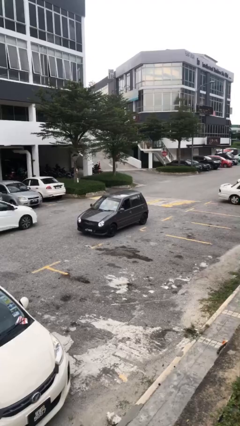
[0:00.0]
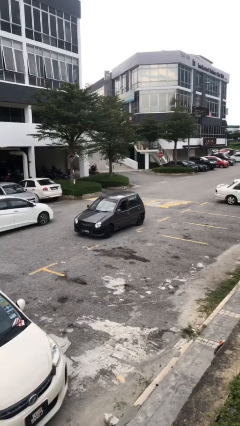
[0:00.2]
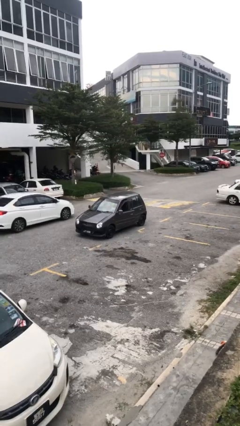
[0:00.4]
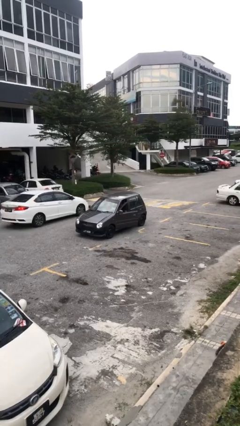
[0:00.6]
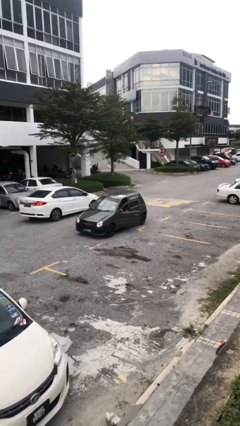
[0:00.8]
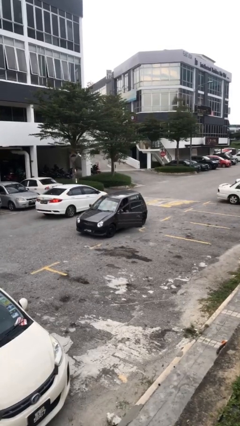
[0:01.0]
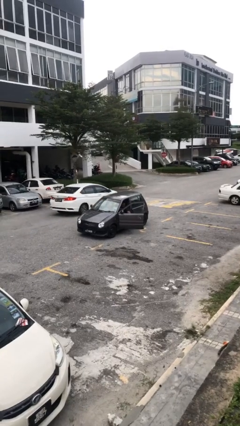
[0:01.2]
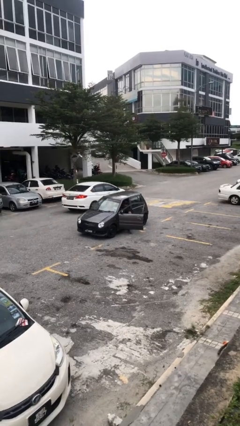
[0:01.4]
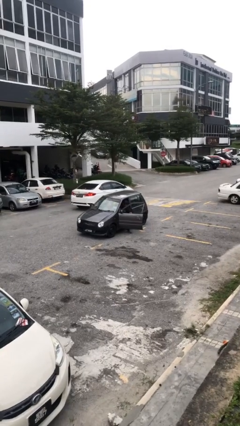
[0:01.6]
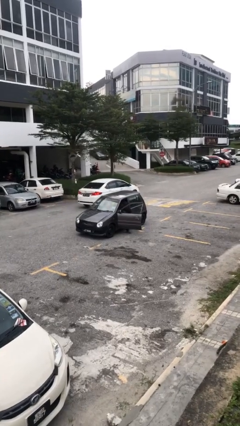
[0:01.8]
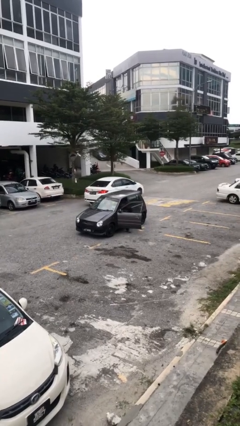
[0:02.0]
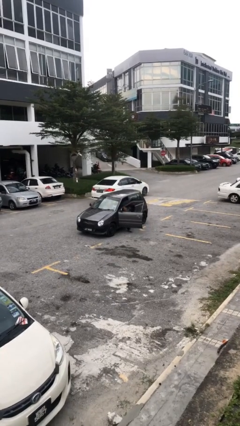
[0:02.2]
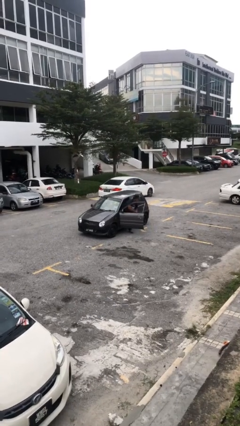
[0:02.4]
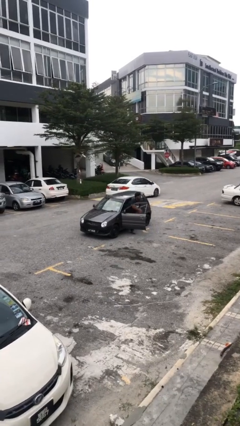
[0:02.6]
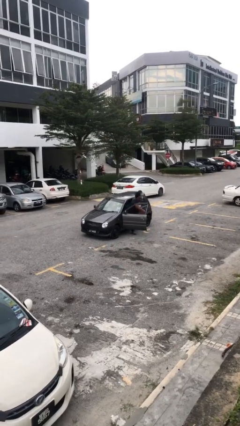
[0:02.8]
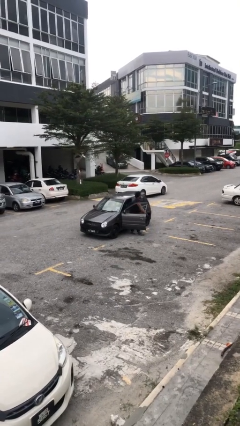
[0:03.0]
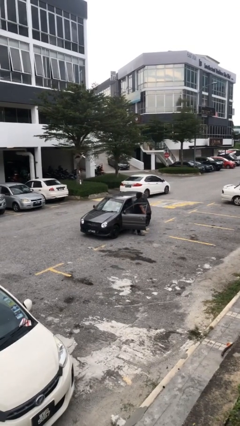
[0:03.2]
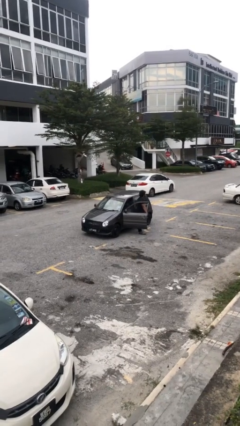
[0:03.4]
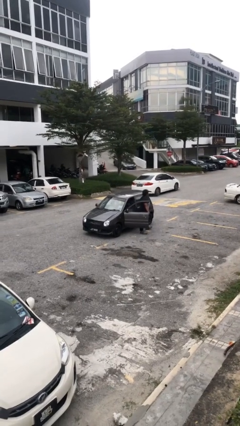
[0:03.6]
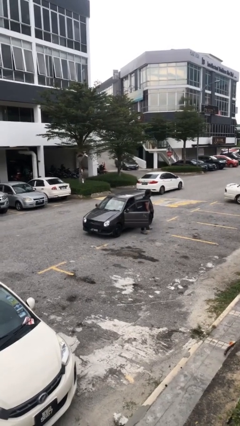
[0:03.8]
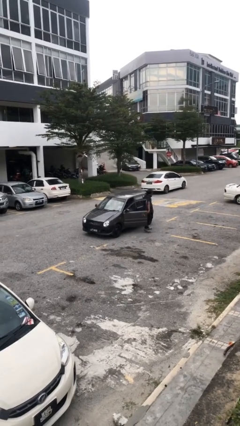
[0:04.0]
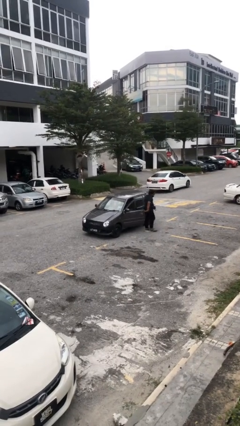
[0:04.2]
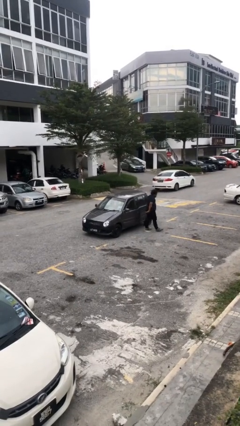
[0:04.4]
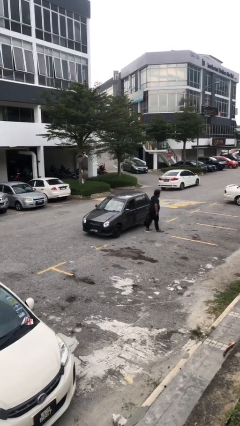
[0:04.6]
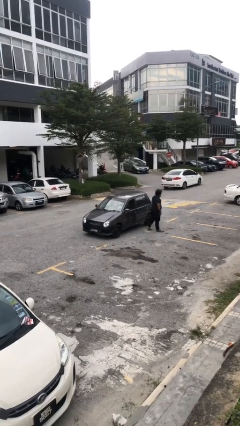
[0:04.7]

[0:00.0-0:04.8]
car drops off person

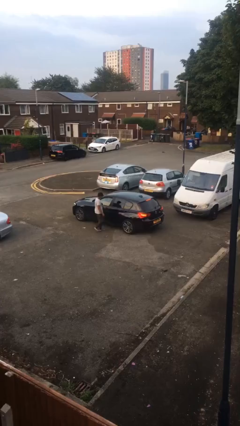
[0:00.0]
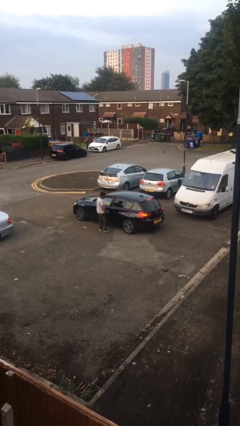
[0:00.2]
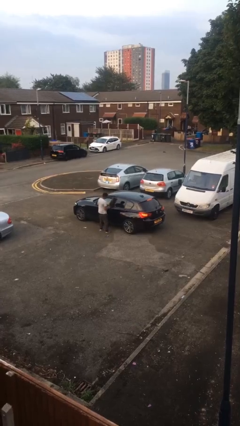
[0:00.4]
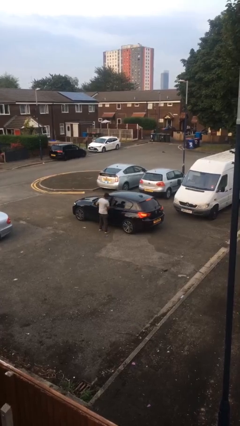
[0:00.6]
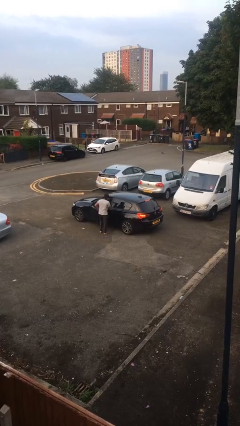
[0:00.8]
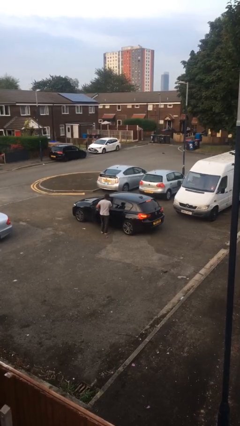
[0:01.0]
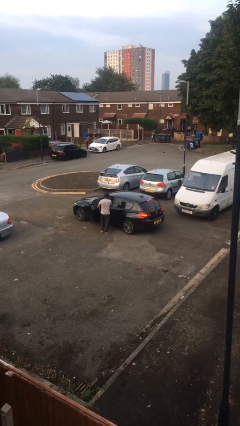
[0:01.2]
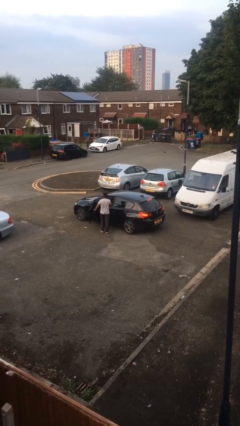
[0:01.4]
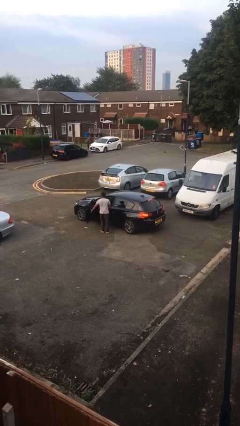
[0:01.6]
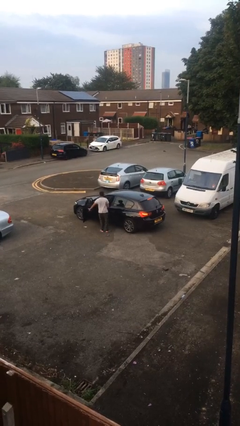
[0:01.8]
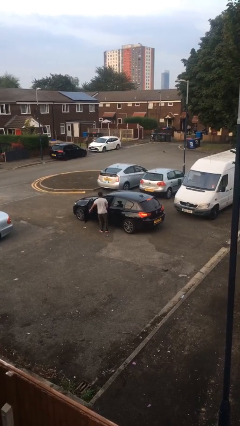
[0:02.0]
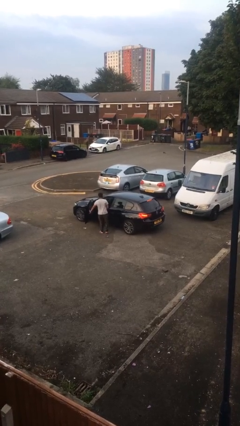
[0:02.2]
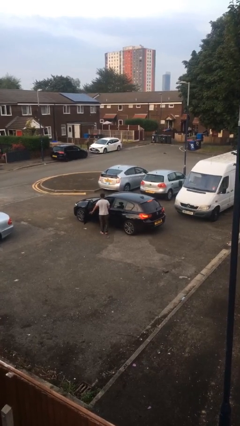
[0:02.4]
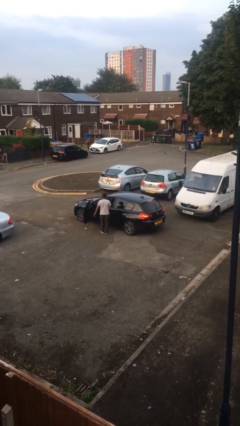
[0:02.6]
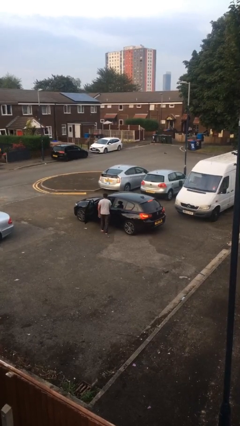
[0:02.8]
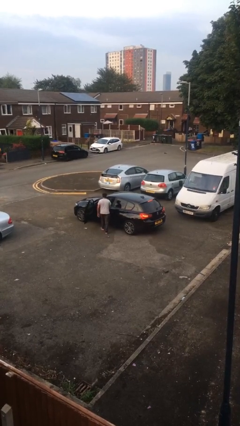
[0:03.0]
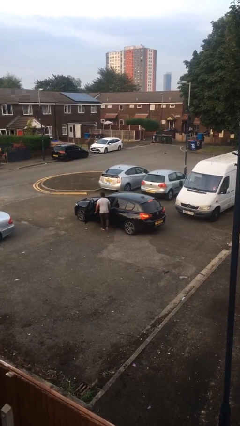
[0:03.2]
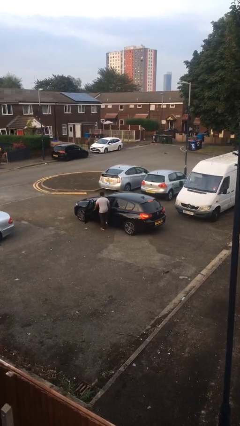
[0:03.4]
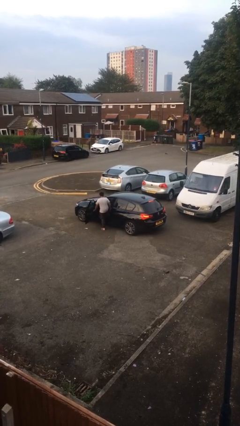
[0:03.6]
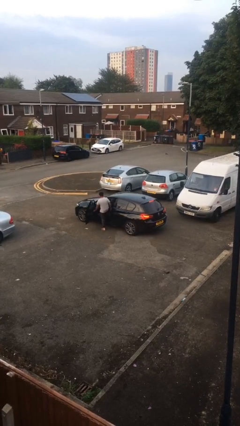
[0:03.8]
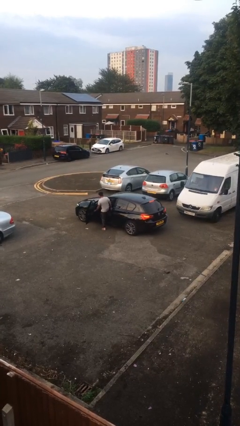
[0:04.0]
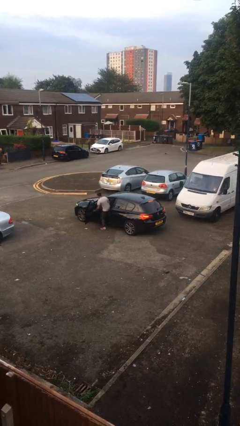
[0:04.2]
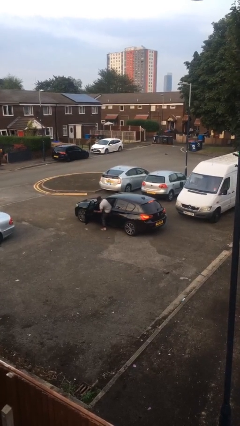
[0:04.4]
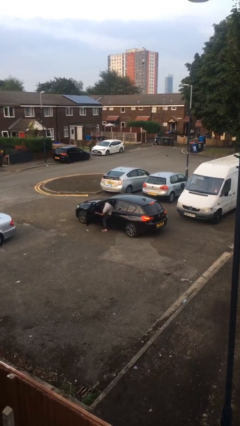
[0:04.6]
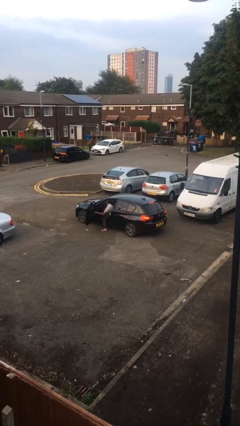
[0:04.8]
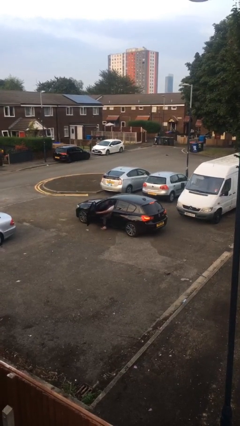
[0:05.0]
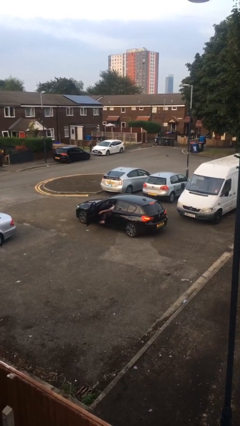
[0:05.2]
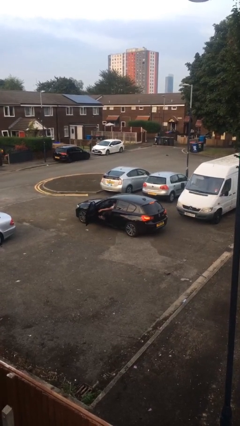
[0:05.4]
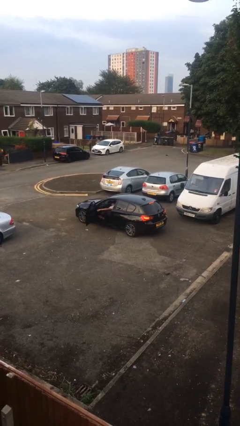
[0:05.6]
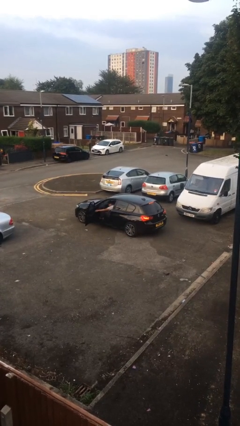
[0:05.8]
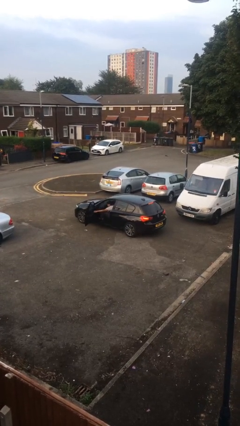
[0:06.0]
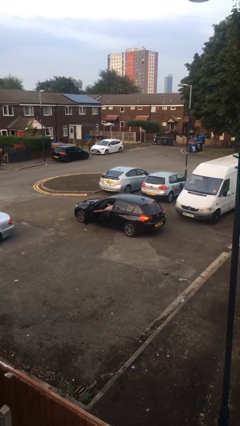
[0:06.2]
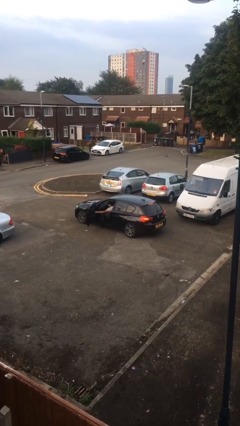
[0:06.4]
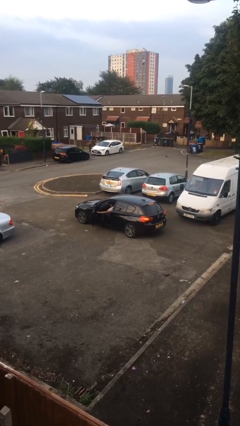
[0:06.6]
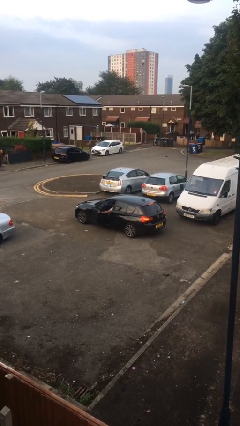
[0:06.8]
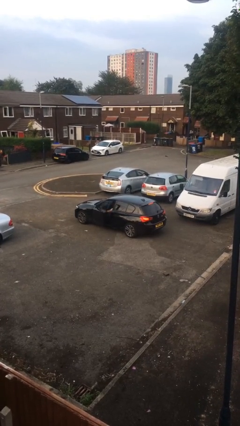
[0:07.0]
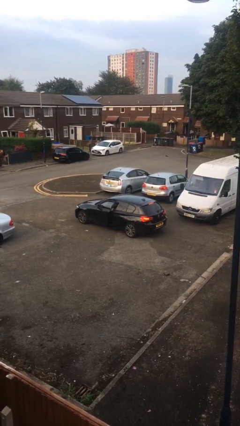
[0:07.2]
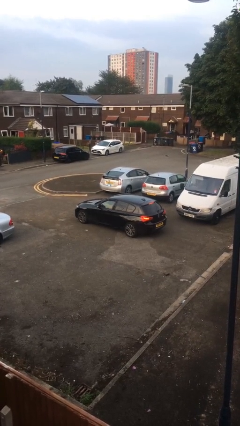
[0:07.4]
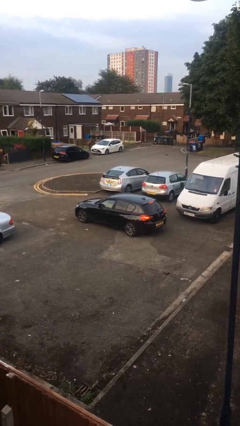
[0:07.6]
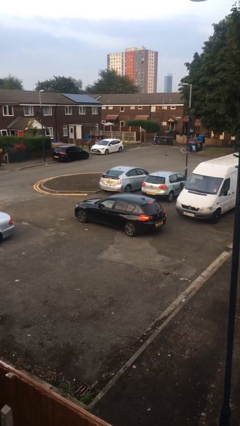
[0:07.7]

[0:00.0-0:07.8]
car picks up person

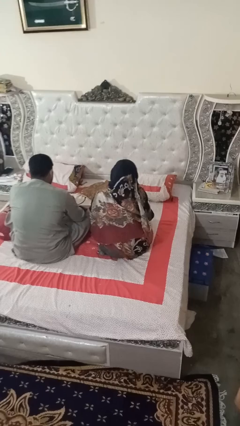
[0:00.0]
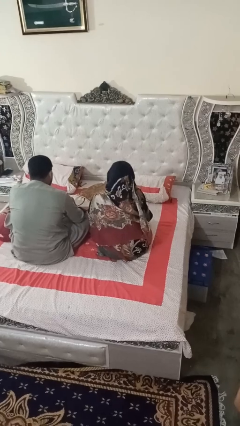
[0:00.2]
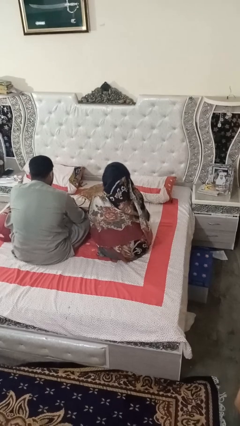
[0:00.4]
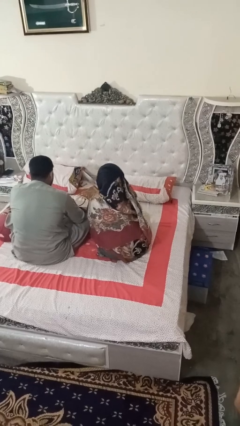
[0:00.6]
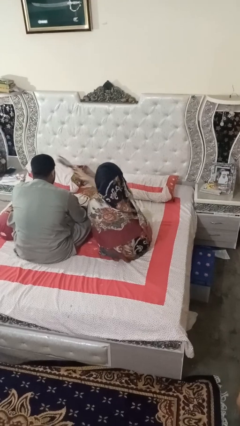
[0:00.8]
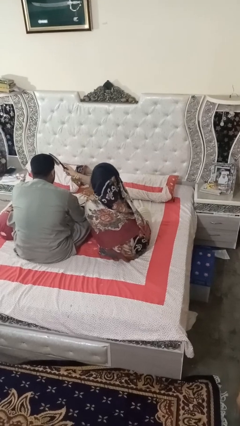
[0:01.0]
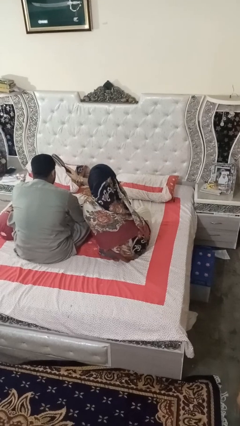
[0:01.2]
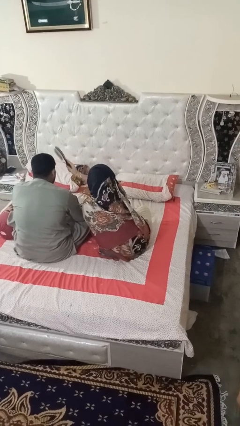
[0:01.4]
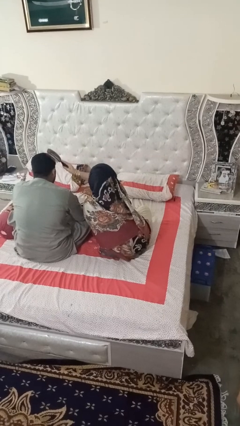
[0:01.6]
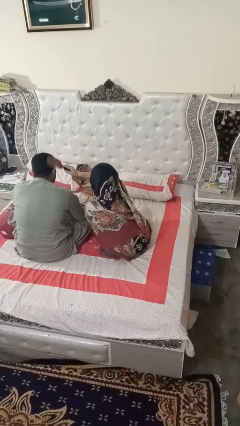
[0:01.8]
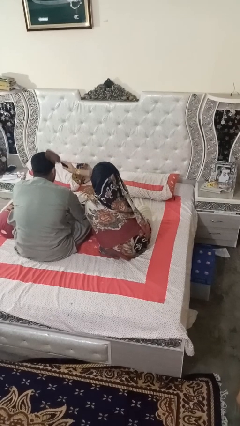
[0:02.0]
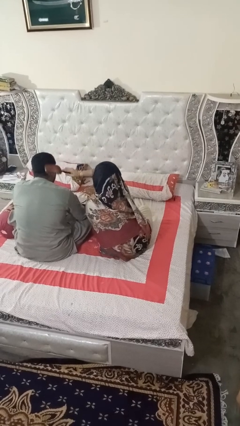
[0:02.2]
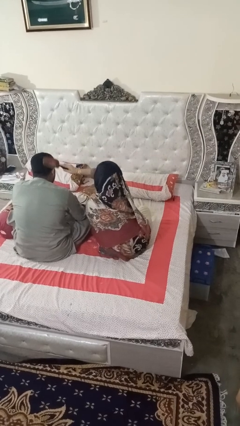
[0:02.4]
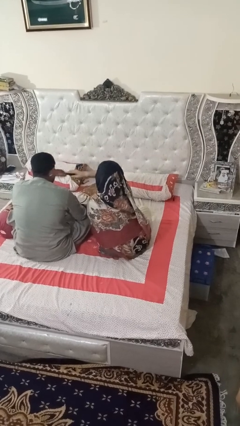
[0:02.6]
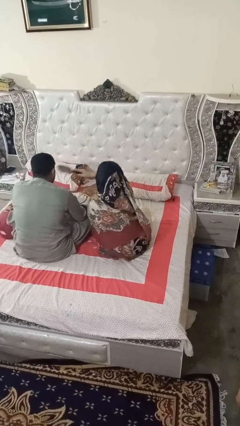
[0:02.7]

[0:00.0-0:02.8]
person brushes hair of person

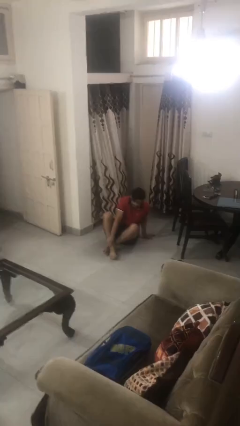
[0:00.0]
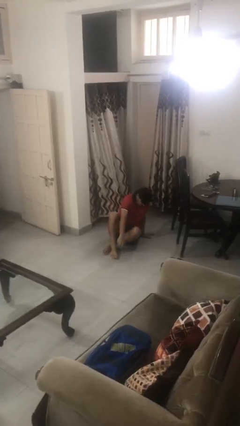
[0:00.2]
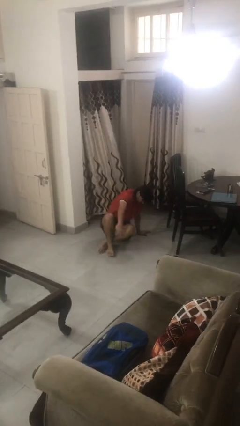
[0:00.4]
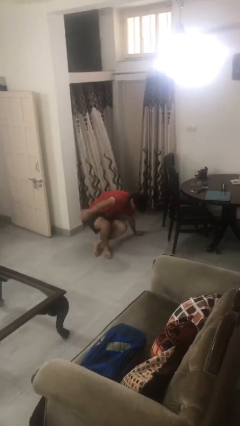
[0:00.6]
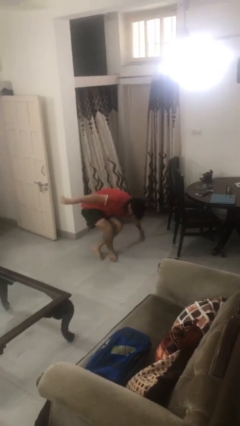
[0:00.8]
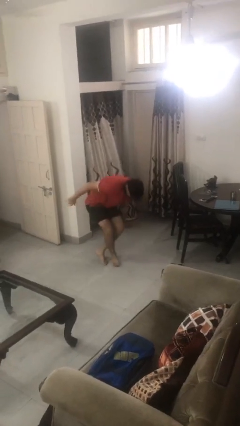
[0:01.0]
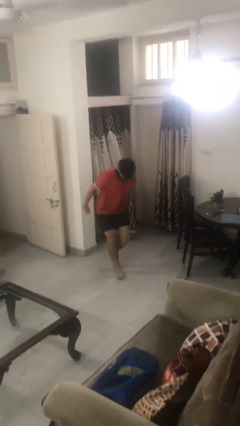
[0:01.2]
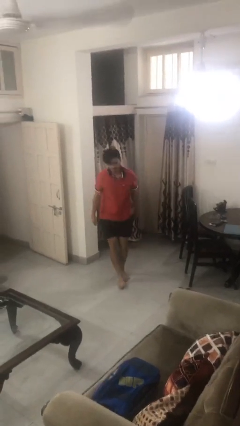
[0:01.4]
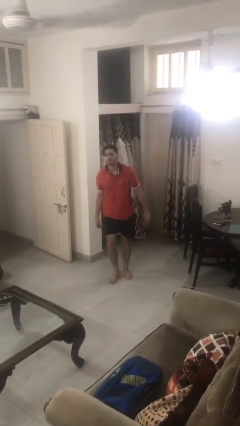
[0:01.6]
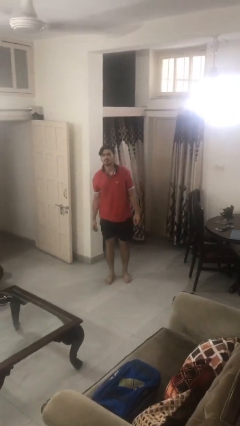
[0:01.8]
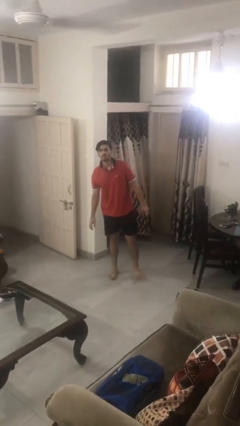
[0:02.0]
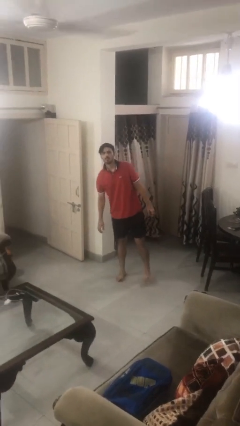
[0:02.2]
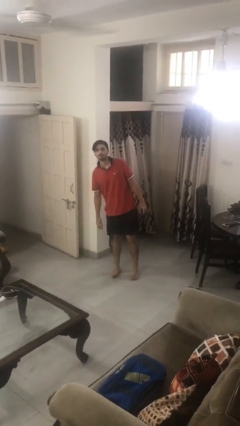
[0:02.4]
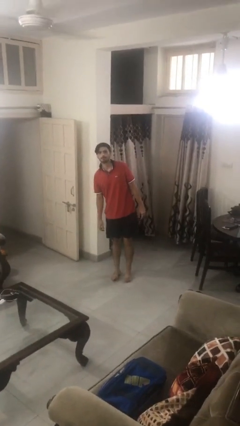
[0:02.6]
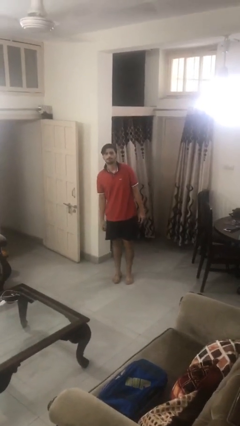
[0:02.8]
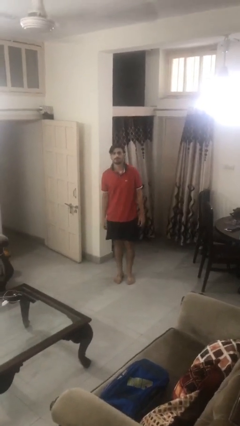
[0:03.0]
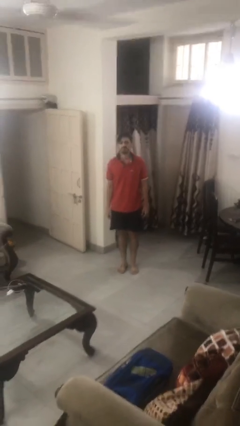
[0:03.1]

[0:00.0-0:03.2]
person stands up from floor
